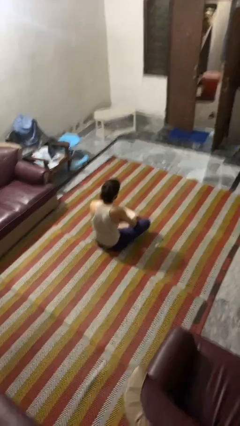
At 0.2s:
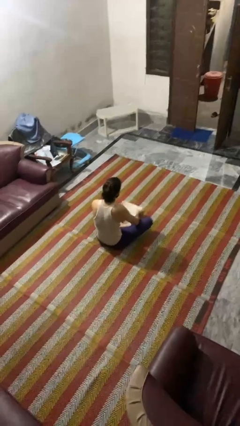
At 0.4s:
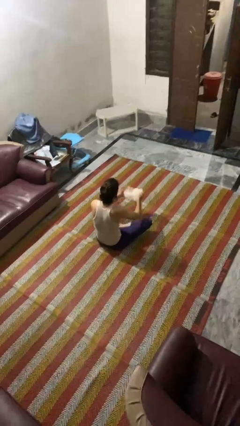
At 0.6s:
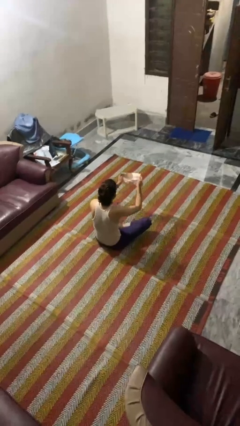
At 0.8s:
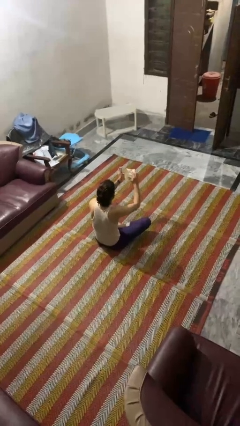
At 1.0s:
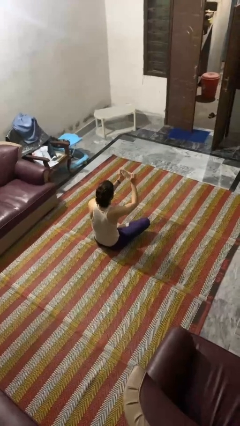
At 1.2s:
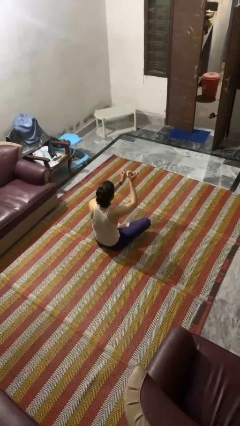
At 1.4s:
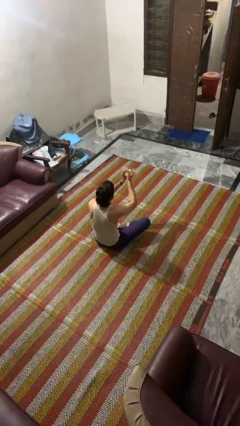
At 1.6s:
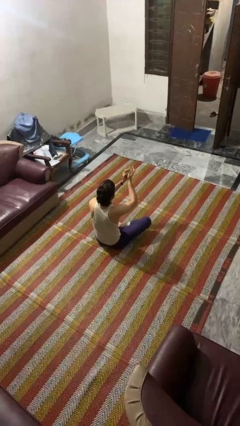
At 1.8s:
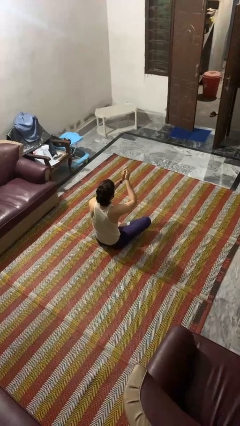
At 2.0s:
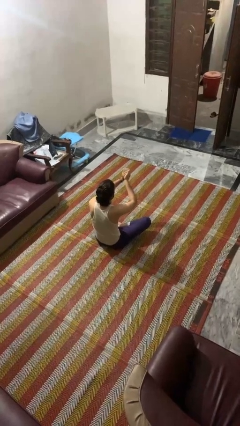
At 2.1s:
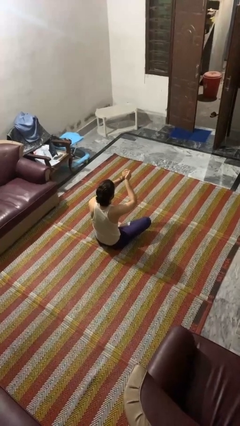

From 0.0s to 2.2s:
person crumples paper

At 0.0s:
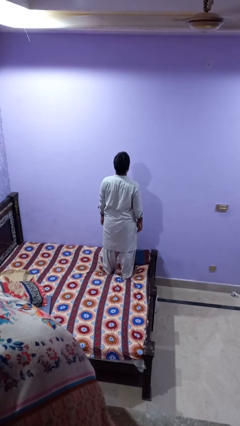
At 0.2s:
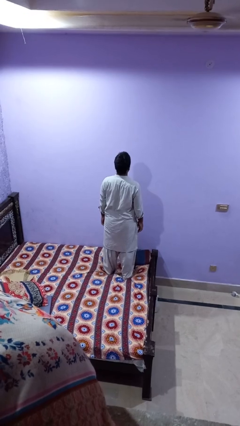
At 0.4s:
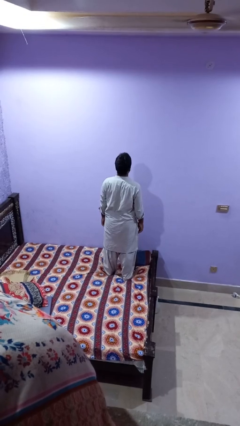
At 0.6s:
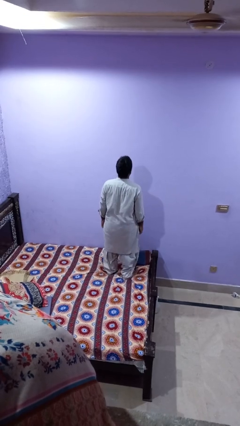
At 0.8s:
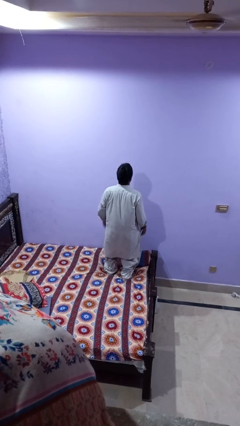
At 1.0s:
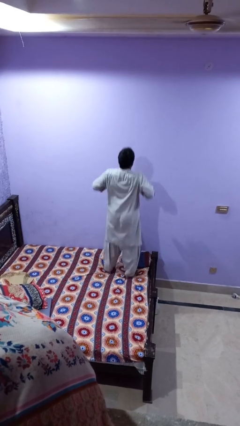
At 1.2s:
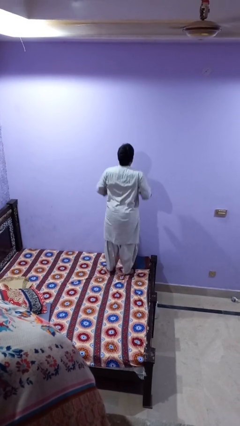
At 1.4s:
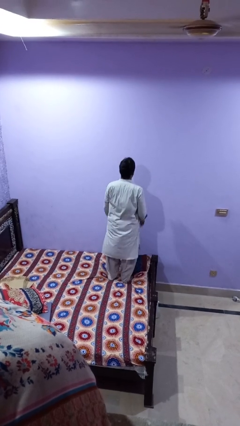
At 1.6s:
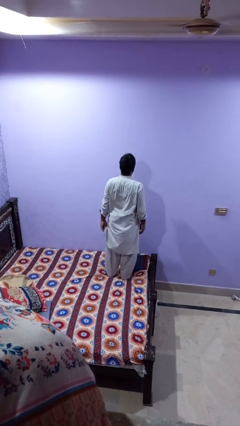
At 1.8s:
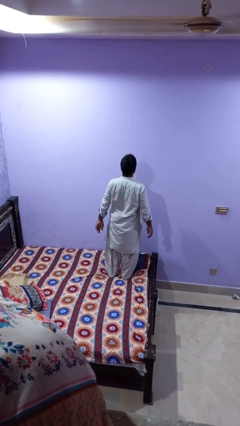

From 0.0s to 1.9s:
person jumps on bed

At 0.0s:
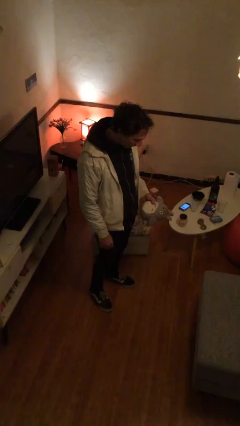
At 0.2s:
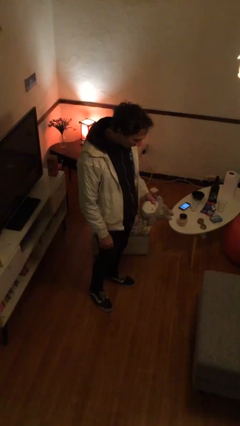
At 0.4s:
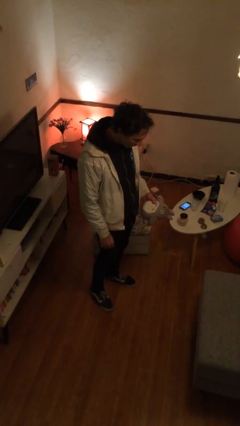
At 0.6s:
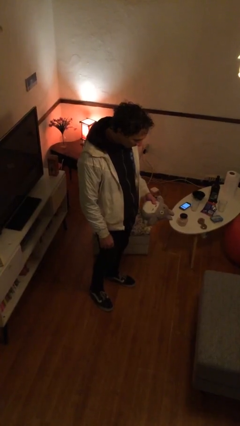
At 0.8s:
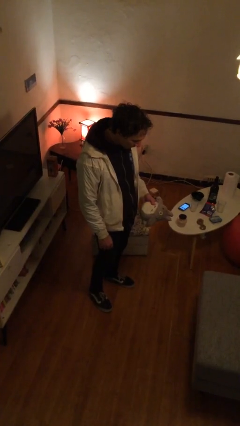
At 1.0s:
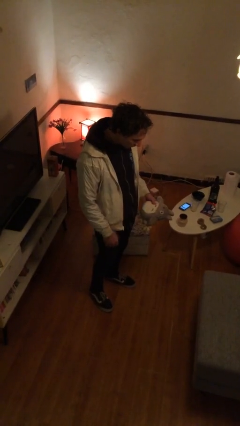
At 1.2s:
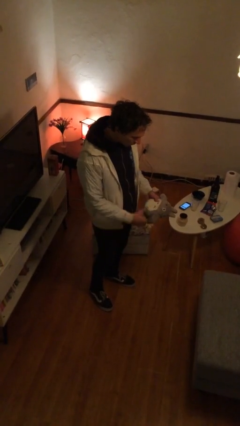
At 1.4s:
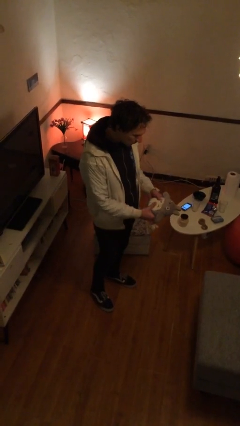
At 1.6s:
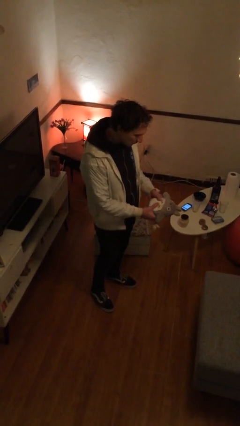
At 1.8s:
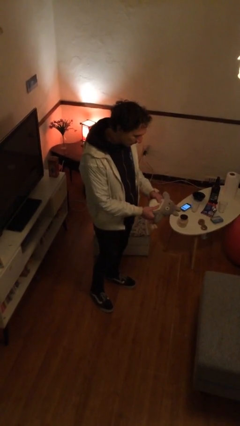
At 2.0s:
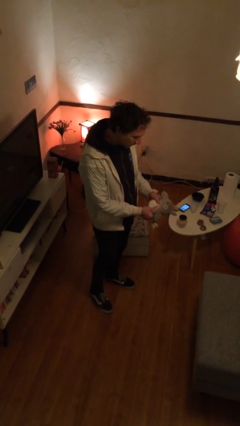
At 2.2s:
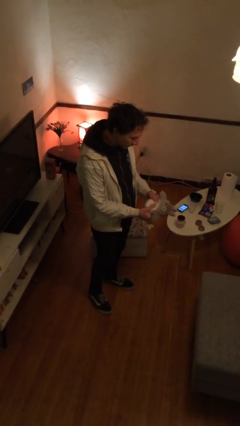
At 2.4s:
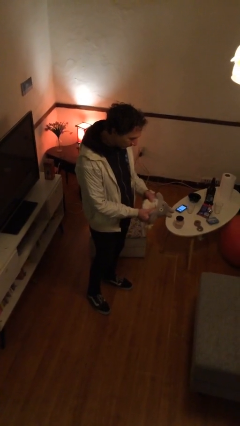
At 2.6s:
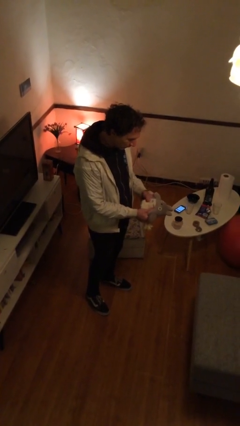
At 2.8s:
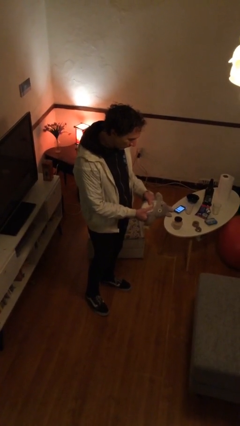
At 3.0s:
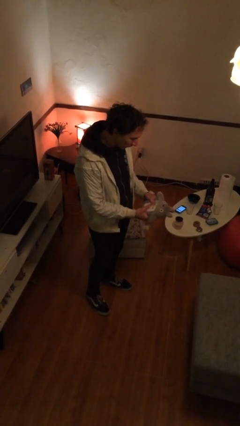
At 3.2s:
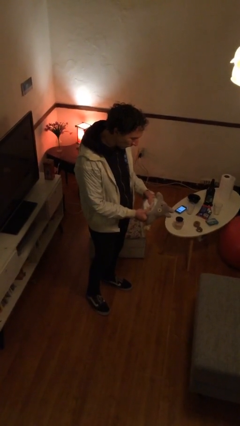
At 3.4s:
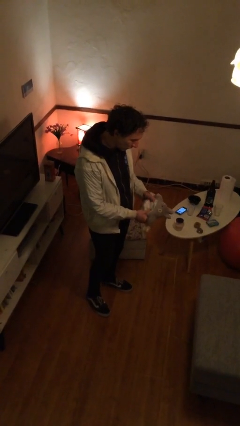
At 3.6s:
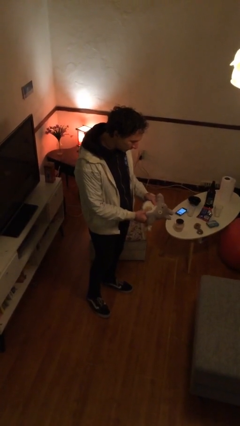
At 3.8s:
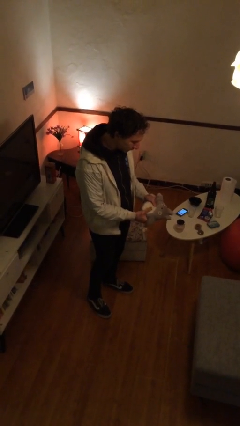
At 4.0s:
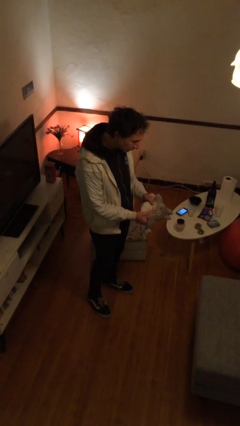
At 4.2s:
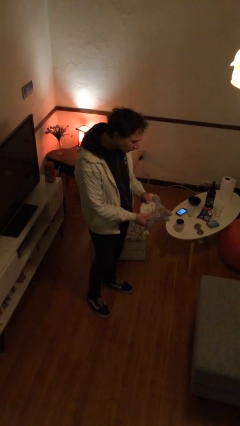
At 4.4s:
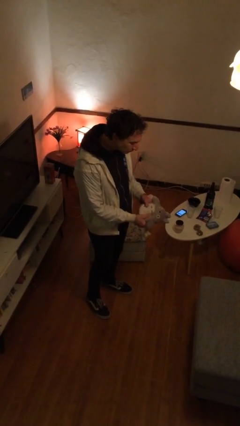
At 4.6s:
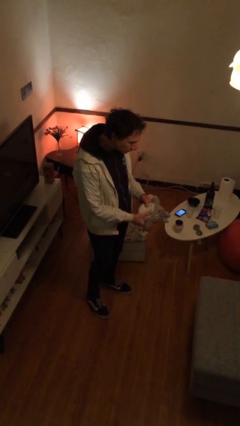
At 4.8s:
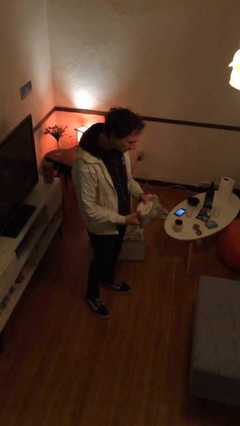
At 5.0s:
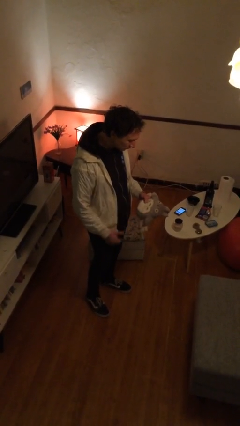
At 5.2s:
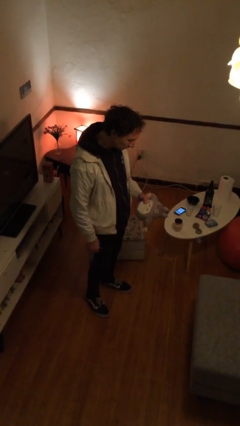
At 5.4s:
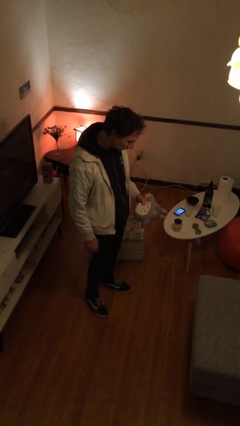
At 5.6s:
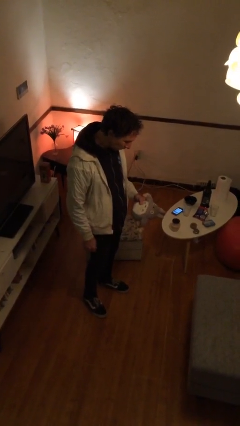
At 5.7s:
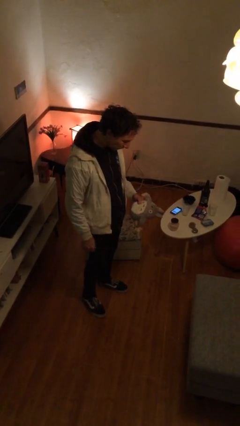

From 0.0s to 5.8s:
person squeezes object

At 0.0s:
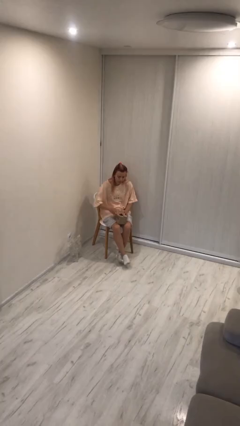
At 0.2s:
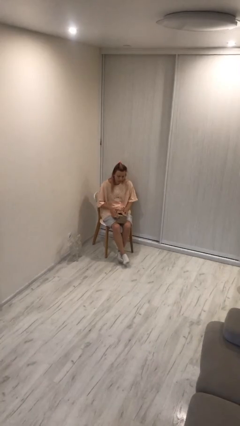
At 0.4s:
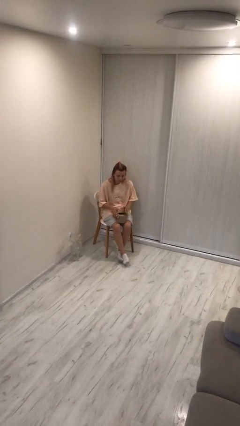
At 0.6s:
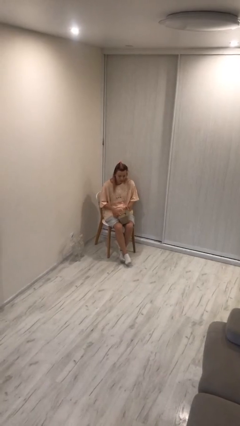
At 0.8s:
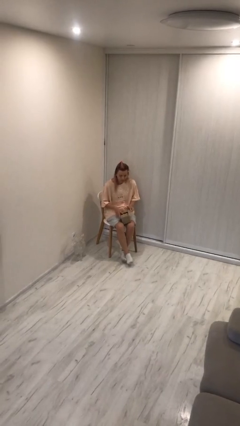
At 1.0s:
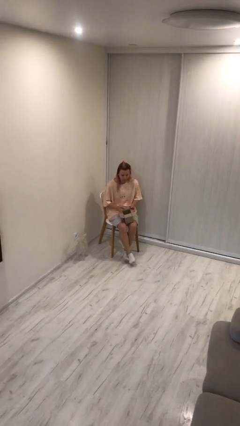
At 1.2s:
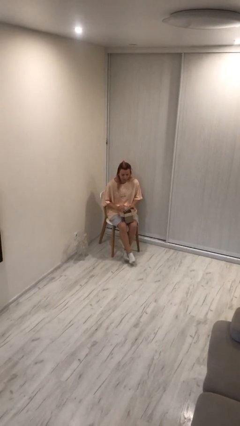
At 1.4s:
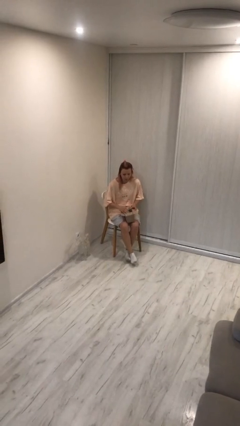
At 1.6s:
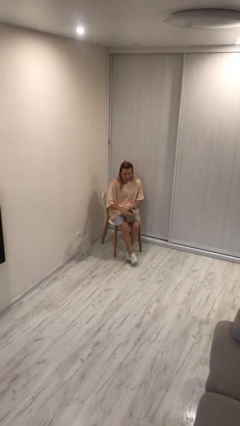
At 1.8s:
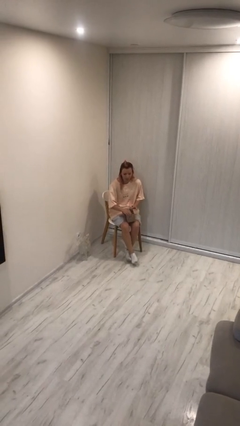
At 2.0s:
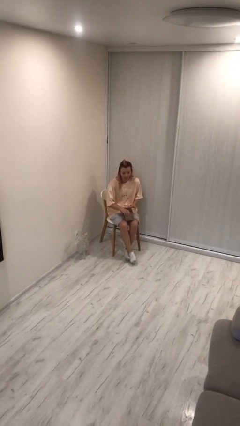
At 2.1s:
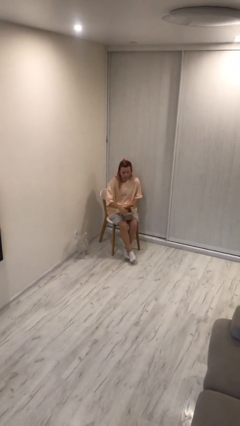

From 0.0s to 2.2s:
person opens box

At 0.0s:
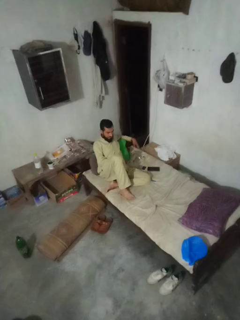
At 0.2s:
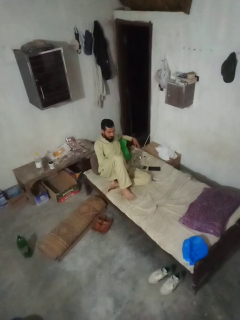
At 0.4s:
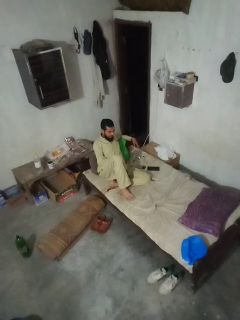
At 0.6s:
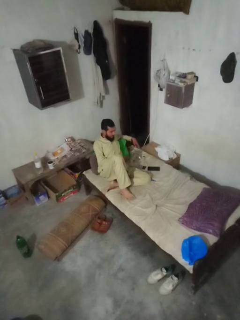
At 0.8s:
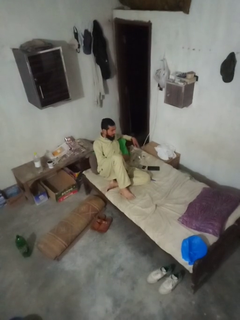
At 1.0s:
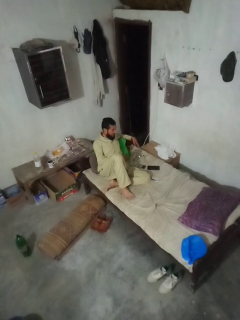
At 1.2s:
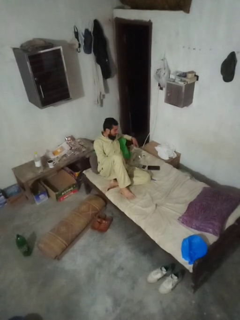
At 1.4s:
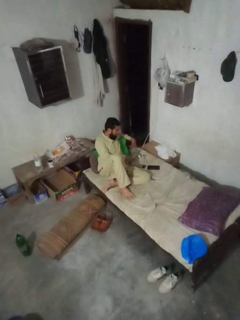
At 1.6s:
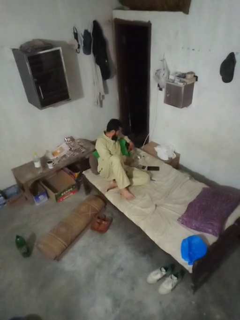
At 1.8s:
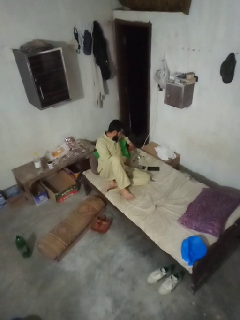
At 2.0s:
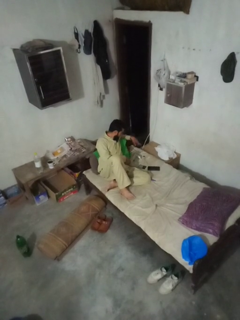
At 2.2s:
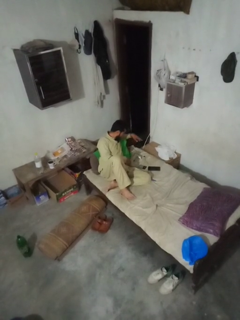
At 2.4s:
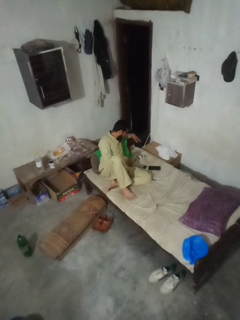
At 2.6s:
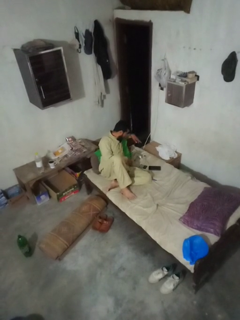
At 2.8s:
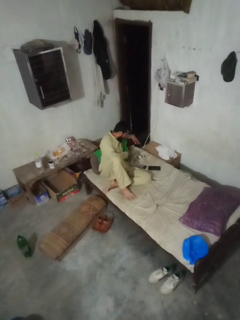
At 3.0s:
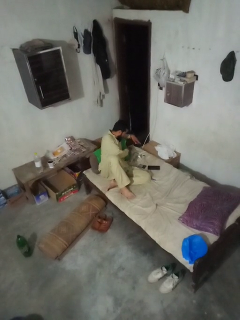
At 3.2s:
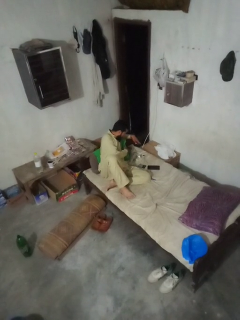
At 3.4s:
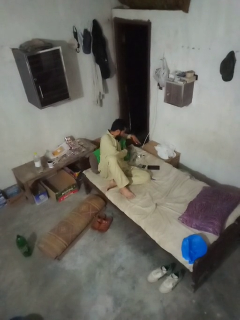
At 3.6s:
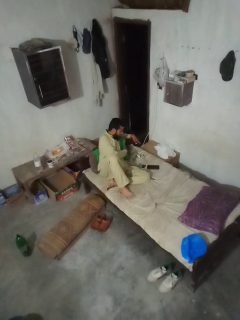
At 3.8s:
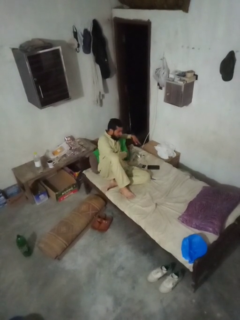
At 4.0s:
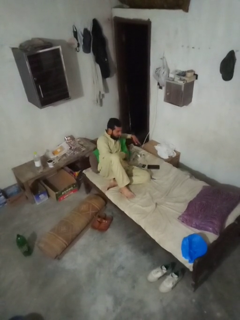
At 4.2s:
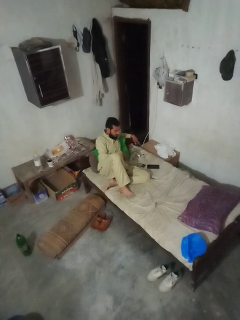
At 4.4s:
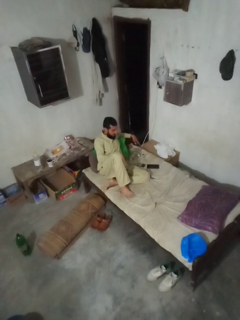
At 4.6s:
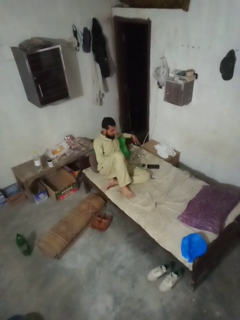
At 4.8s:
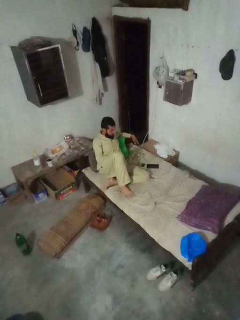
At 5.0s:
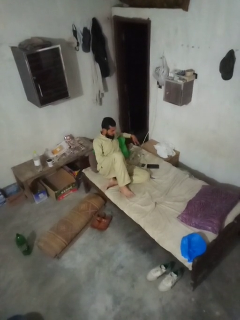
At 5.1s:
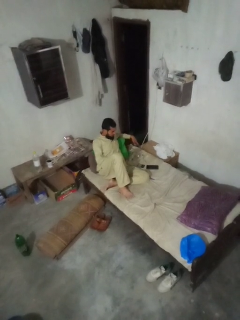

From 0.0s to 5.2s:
person searches under bed

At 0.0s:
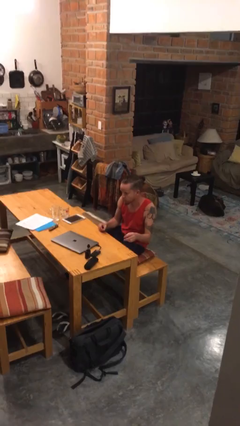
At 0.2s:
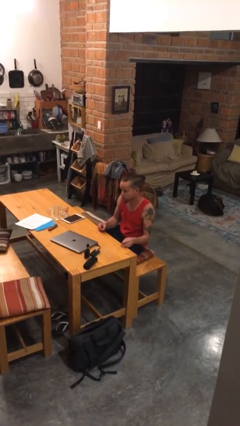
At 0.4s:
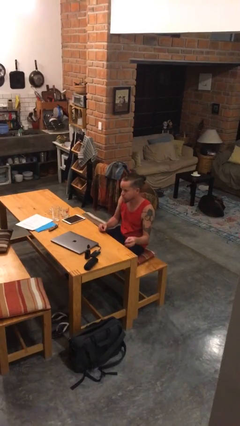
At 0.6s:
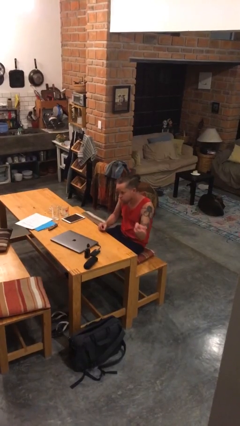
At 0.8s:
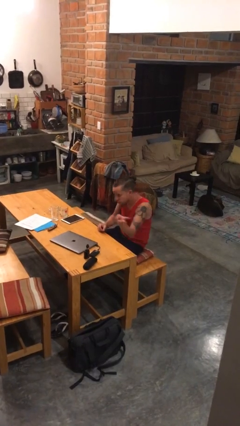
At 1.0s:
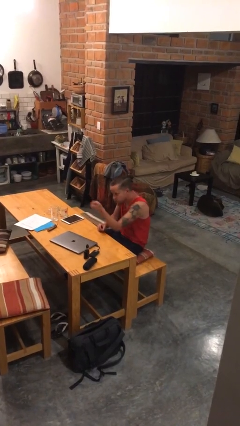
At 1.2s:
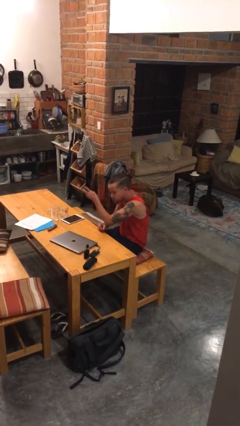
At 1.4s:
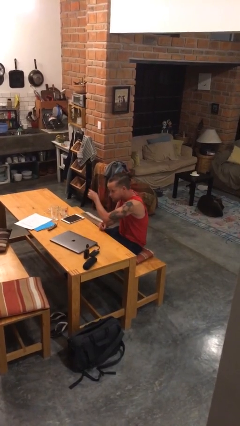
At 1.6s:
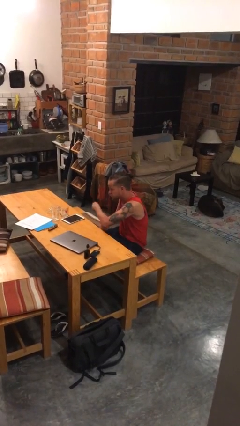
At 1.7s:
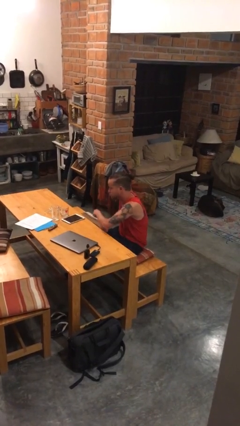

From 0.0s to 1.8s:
person gestures swipe right
